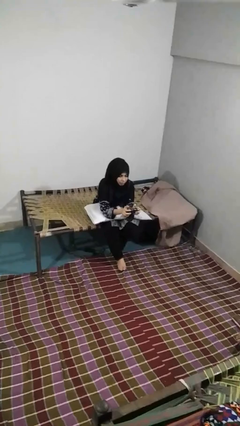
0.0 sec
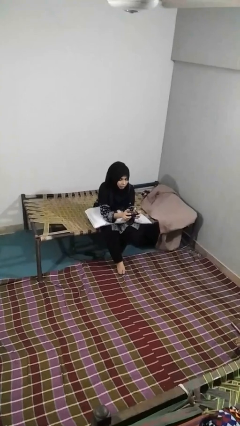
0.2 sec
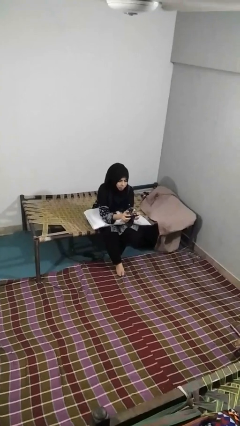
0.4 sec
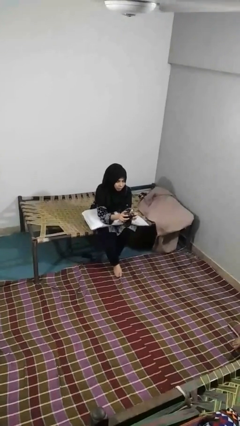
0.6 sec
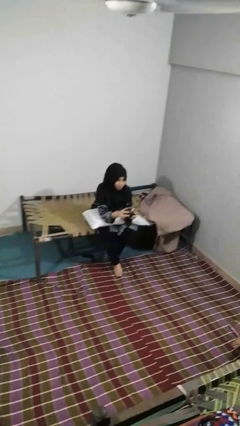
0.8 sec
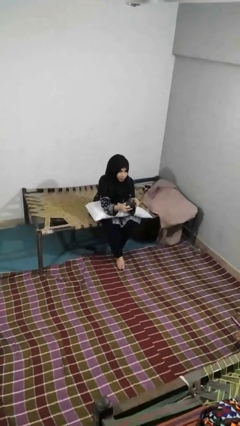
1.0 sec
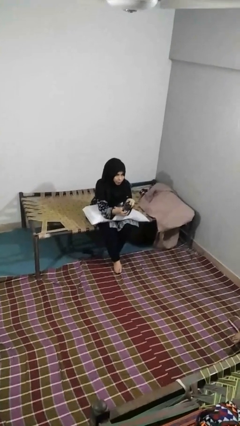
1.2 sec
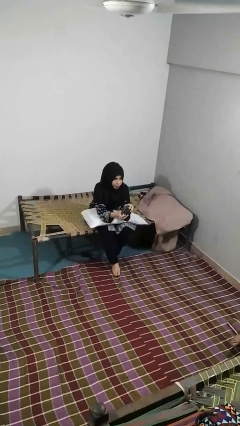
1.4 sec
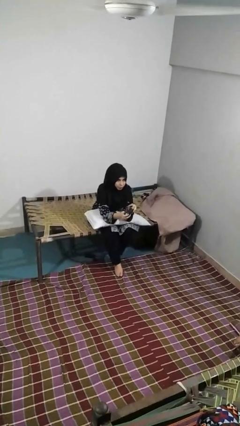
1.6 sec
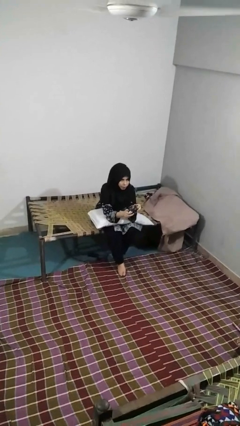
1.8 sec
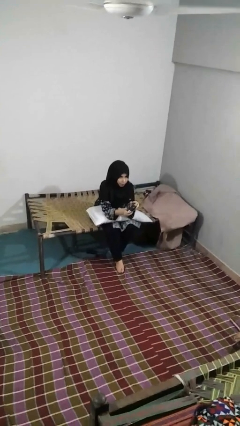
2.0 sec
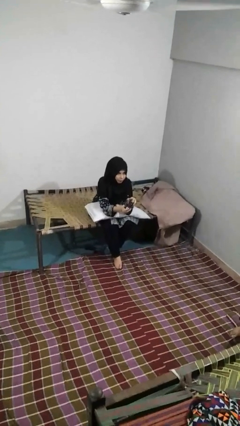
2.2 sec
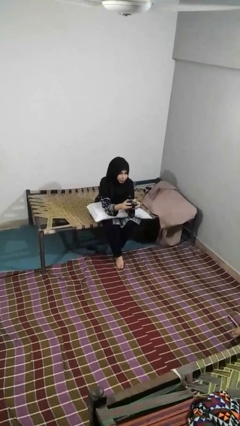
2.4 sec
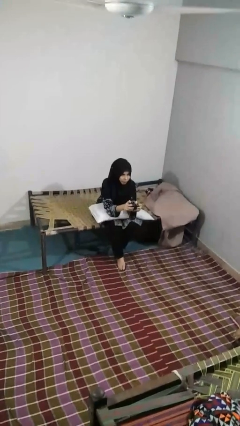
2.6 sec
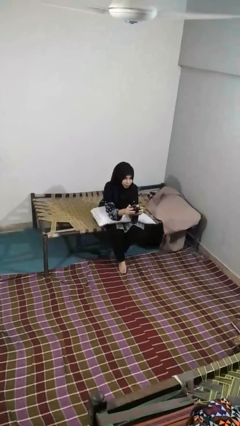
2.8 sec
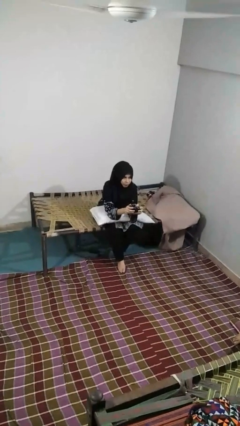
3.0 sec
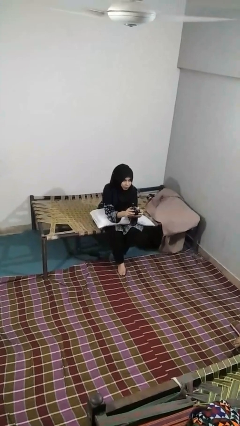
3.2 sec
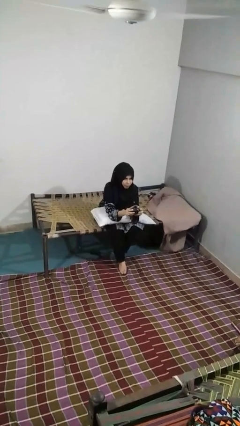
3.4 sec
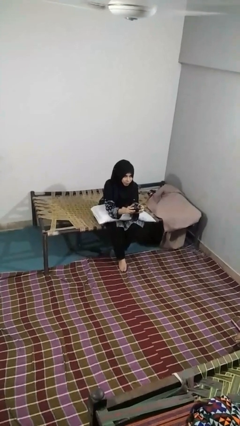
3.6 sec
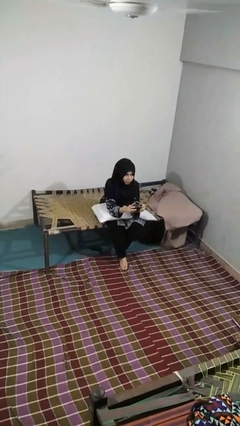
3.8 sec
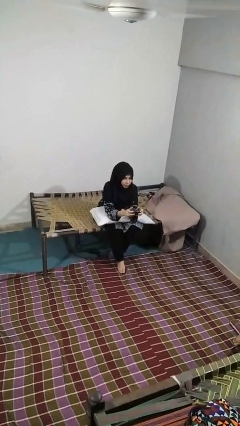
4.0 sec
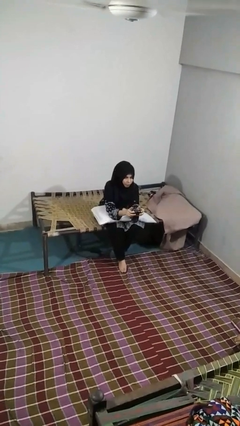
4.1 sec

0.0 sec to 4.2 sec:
person interacts with handheld game

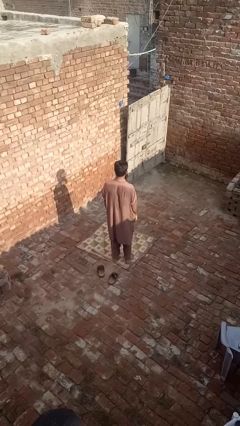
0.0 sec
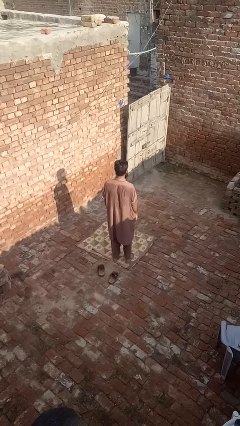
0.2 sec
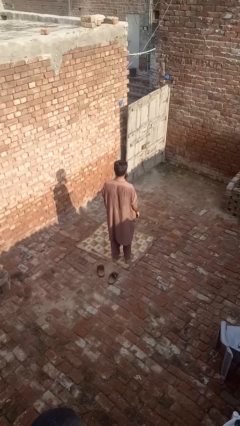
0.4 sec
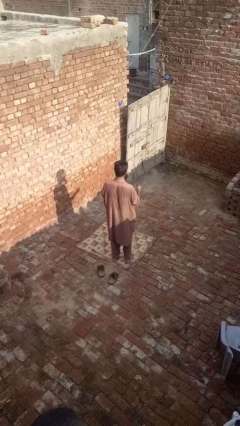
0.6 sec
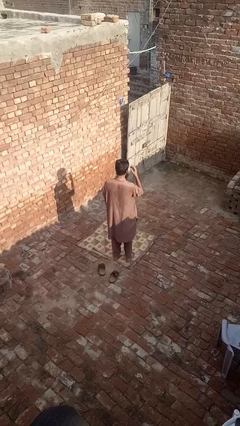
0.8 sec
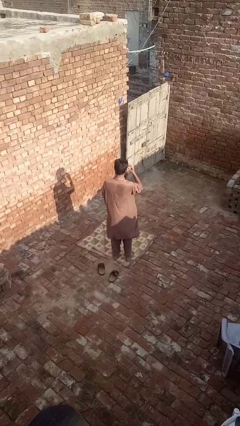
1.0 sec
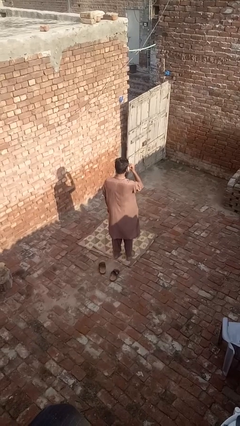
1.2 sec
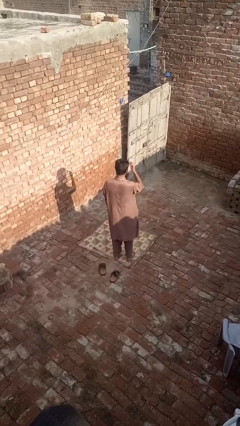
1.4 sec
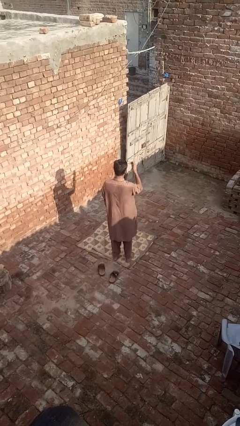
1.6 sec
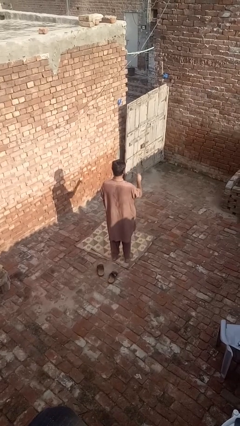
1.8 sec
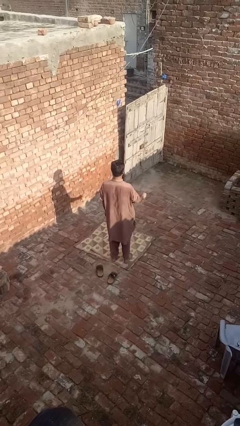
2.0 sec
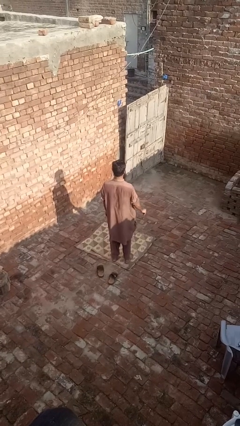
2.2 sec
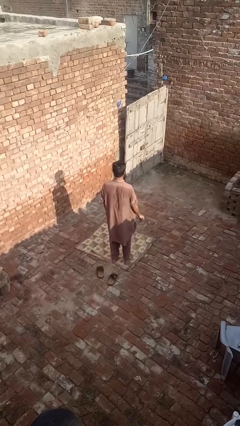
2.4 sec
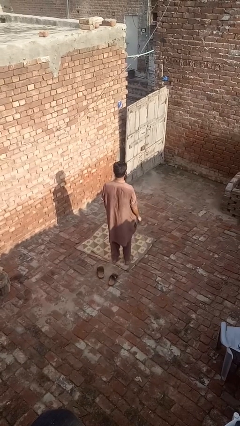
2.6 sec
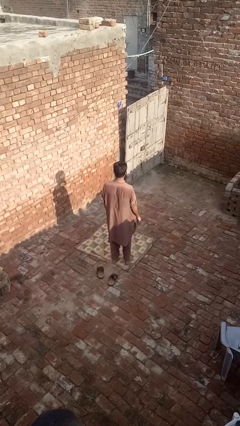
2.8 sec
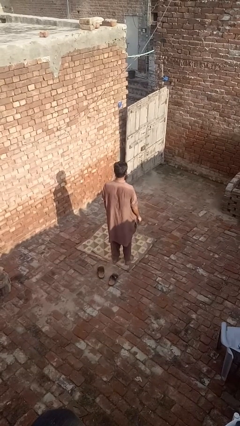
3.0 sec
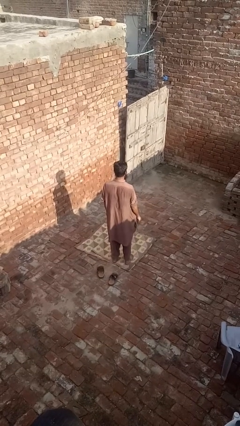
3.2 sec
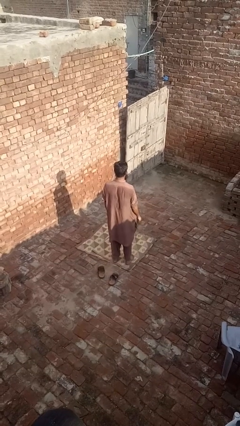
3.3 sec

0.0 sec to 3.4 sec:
person takes off glasses

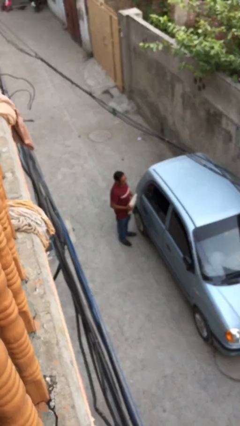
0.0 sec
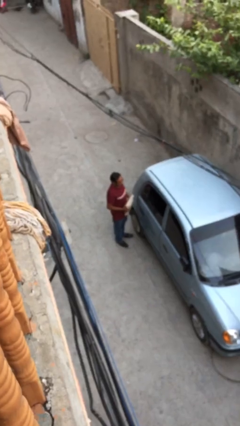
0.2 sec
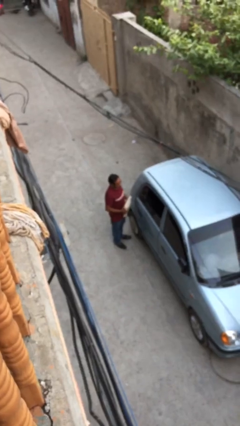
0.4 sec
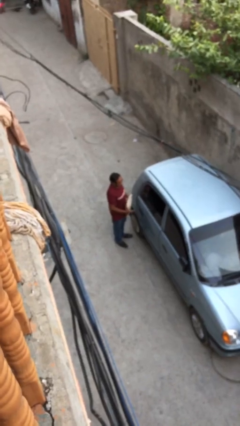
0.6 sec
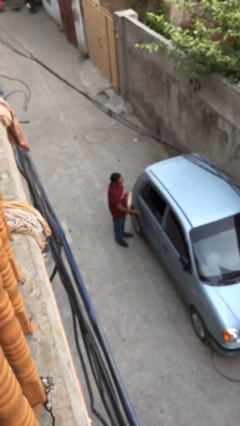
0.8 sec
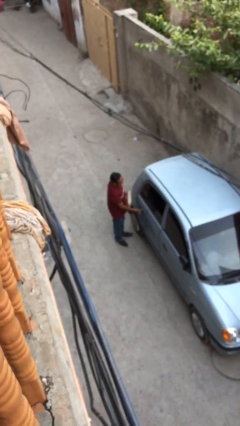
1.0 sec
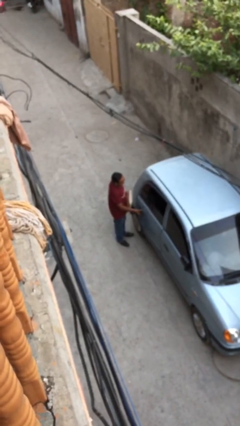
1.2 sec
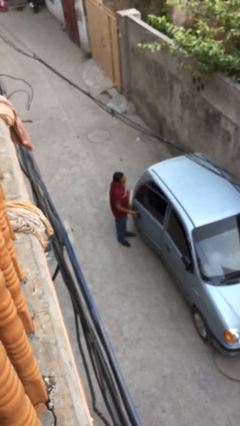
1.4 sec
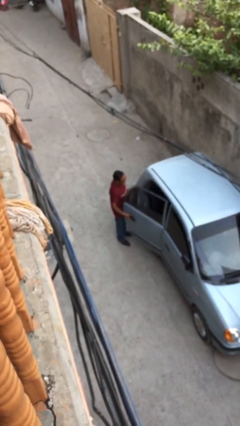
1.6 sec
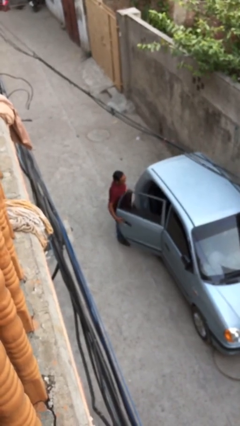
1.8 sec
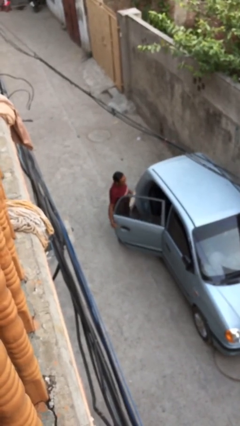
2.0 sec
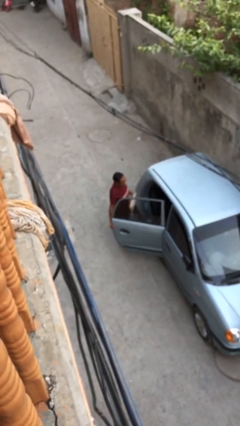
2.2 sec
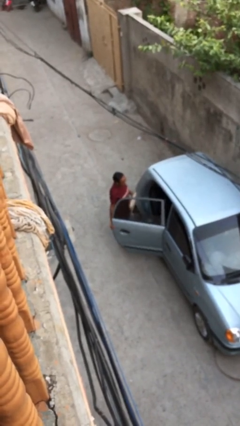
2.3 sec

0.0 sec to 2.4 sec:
person opens car door

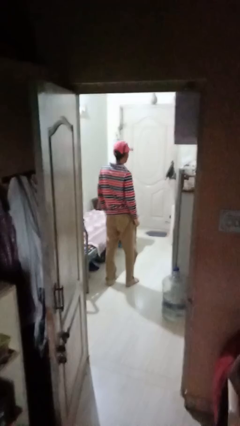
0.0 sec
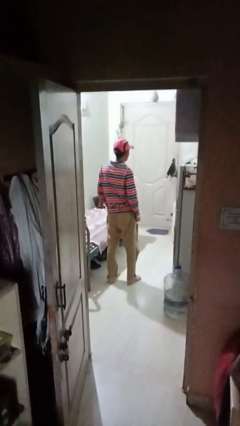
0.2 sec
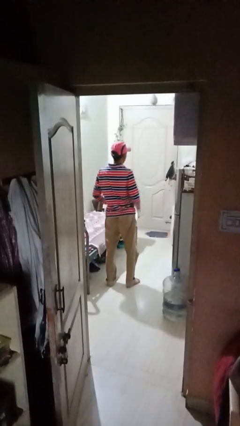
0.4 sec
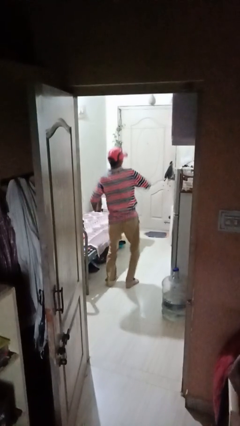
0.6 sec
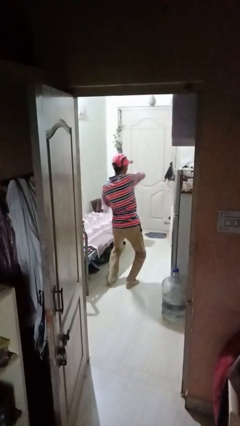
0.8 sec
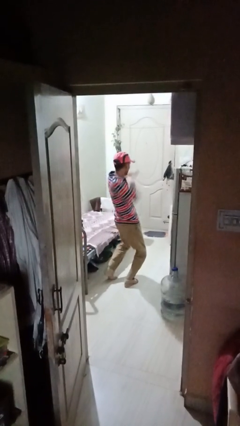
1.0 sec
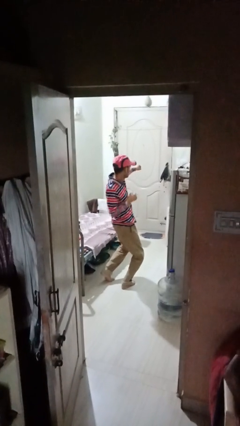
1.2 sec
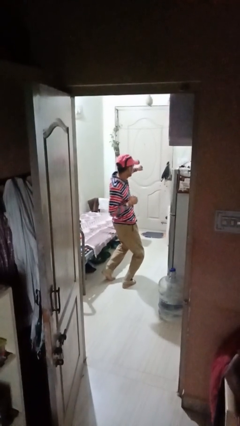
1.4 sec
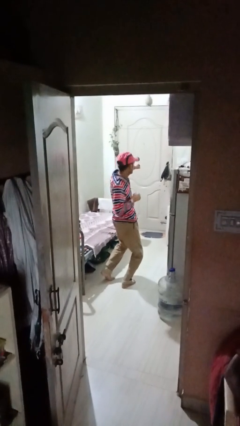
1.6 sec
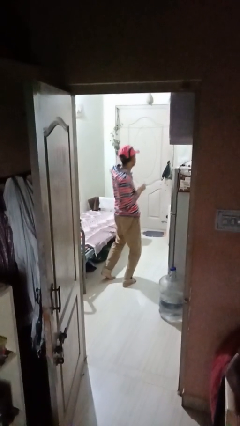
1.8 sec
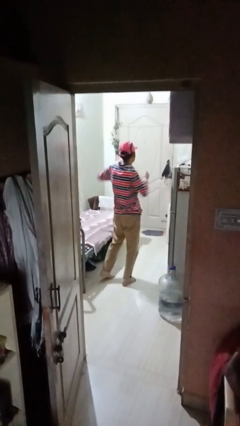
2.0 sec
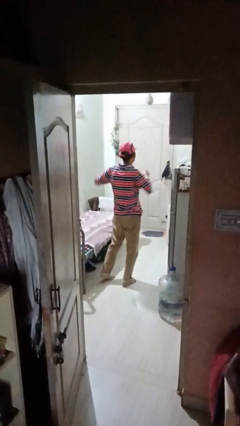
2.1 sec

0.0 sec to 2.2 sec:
person punches

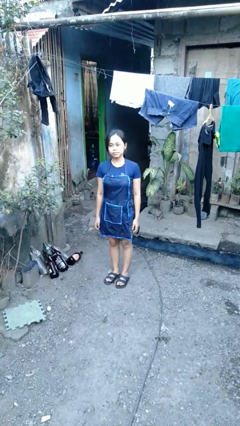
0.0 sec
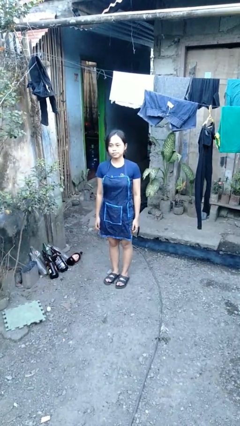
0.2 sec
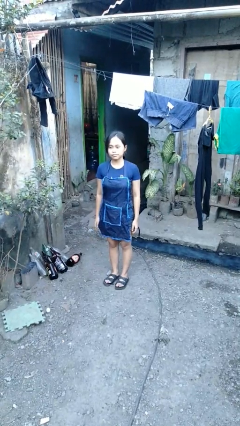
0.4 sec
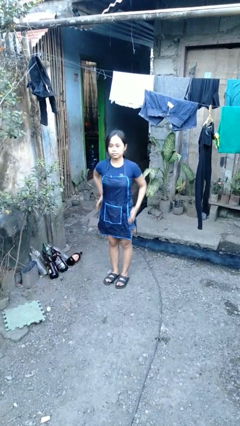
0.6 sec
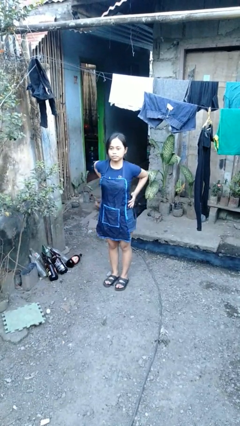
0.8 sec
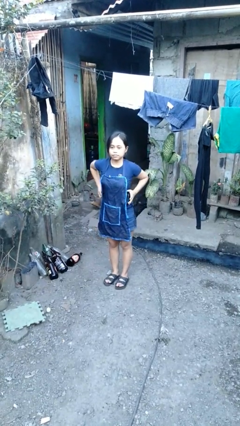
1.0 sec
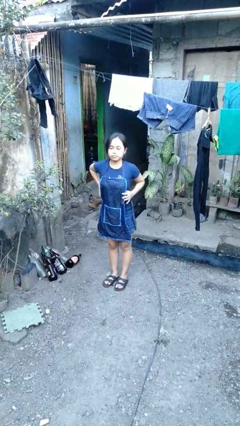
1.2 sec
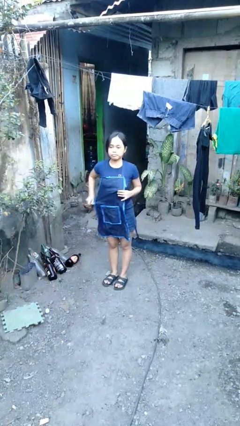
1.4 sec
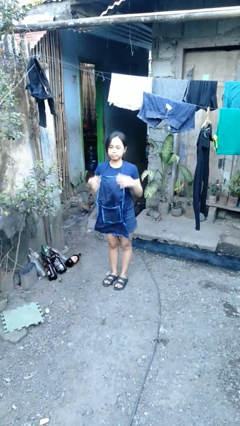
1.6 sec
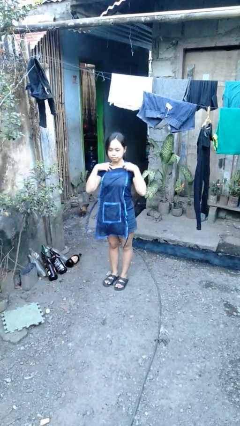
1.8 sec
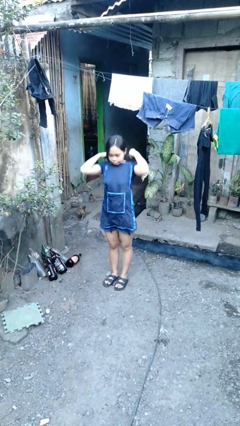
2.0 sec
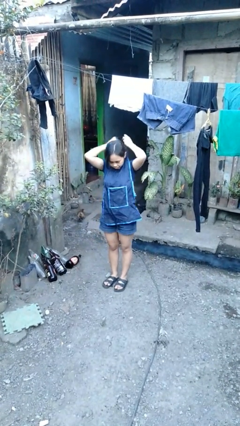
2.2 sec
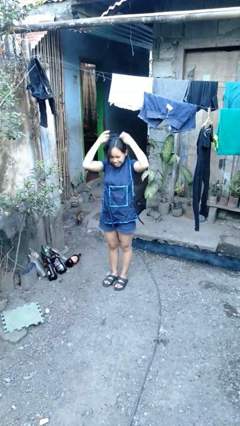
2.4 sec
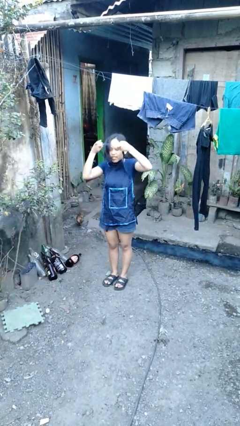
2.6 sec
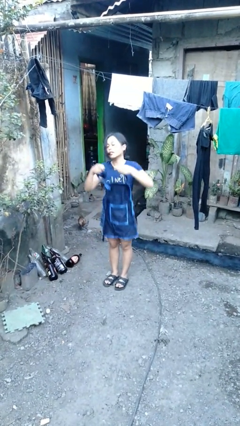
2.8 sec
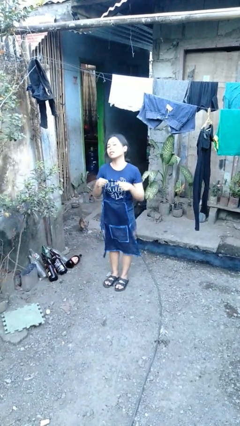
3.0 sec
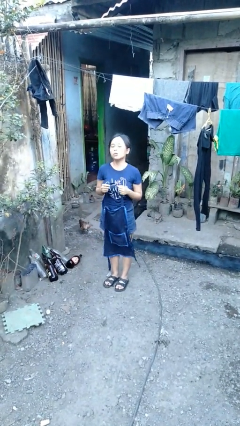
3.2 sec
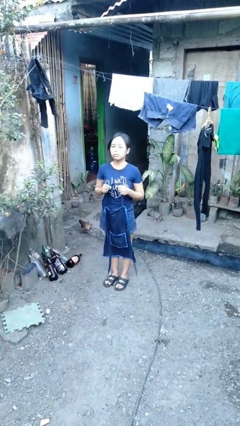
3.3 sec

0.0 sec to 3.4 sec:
person takes off apron

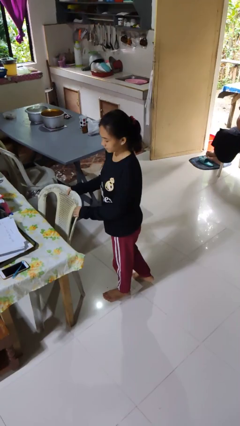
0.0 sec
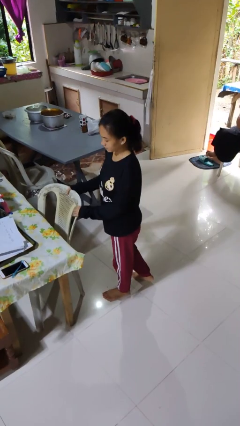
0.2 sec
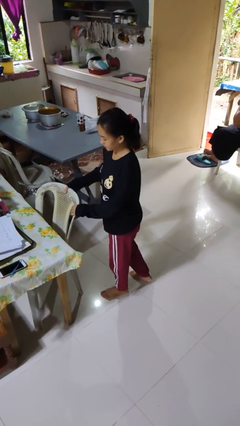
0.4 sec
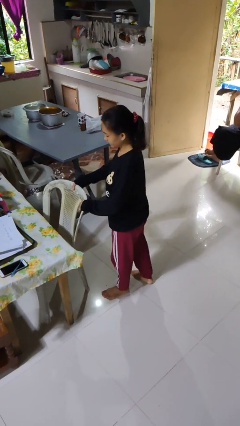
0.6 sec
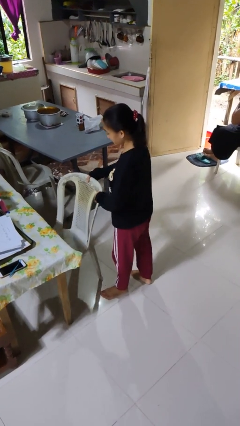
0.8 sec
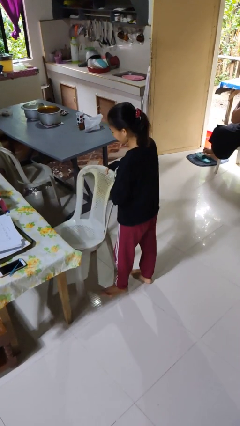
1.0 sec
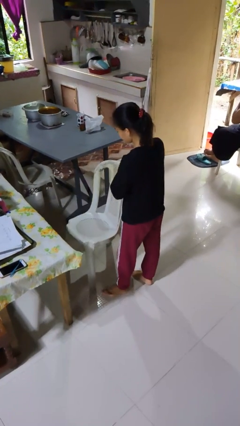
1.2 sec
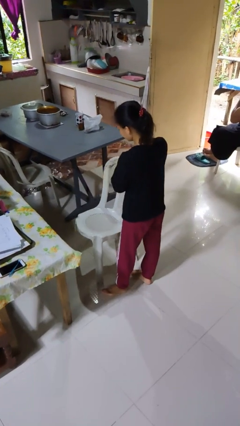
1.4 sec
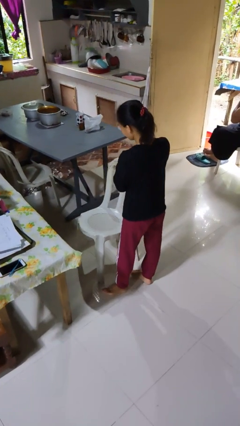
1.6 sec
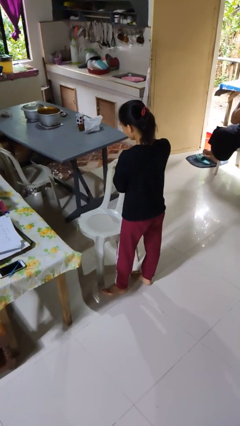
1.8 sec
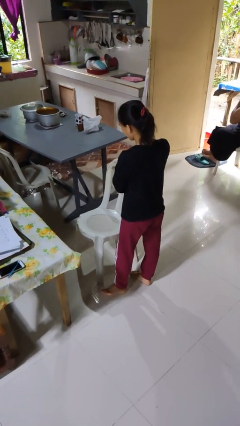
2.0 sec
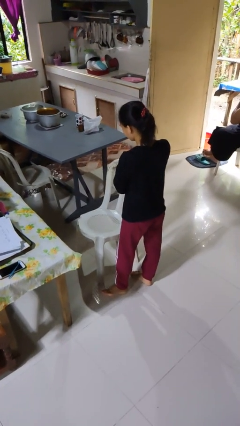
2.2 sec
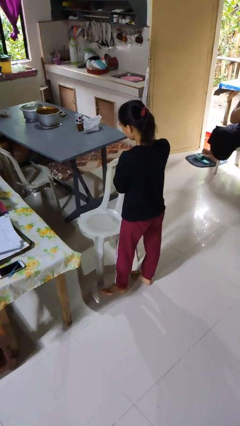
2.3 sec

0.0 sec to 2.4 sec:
person pulls out chair
